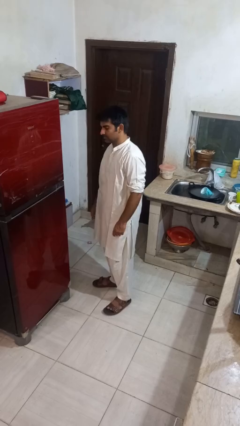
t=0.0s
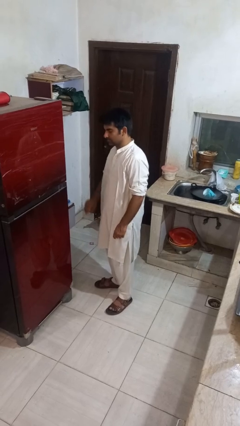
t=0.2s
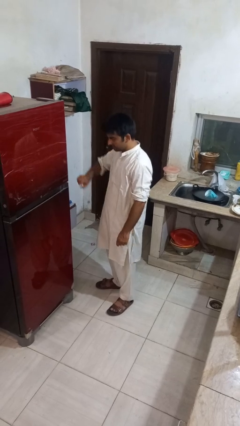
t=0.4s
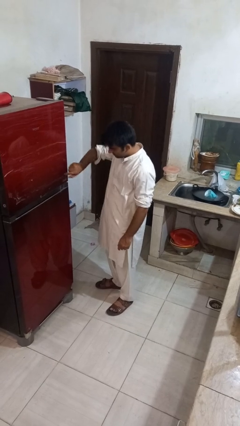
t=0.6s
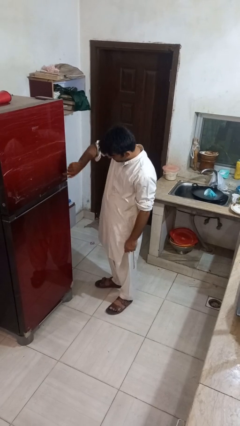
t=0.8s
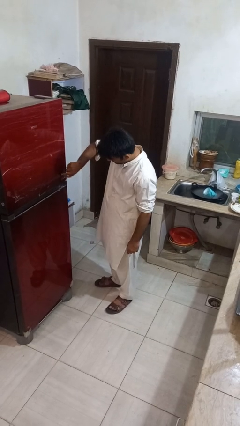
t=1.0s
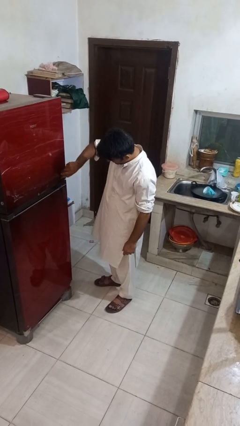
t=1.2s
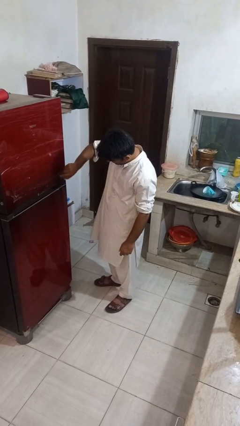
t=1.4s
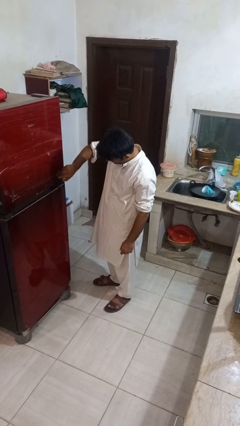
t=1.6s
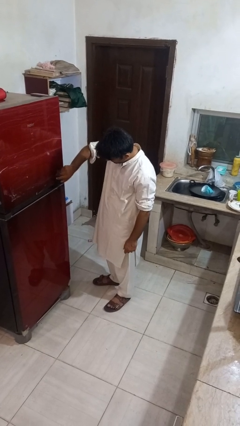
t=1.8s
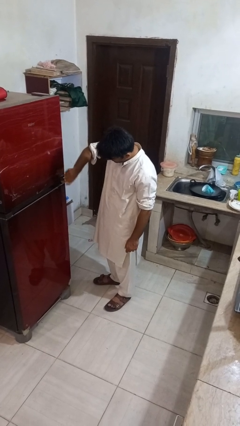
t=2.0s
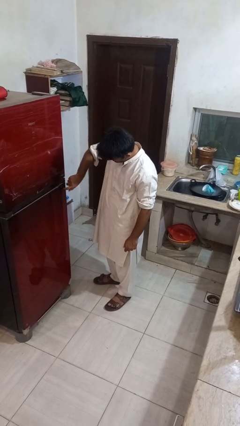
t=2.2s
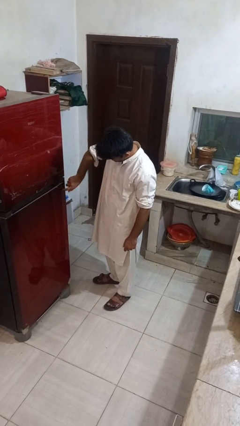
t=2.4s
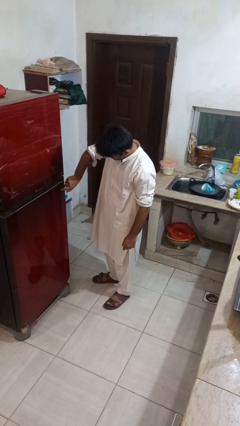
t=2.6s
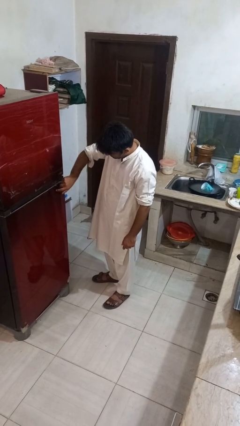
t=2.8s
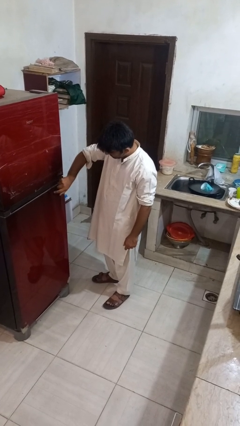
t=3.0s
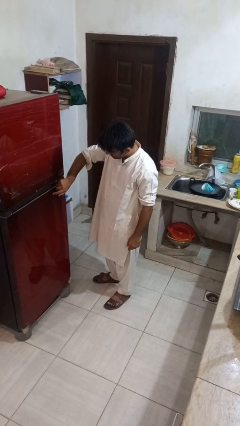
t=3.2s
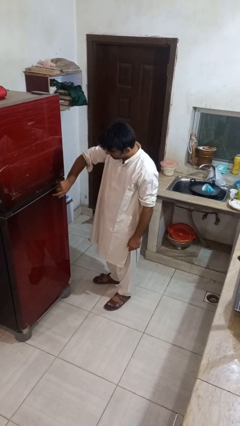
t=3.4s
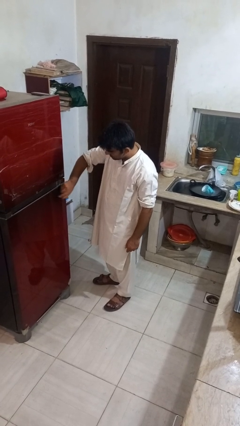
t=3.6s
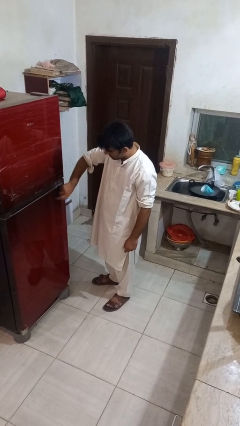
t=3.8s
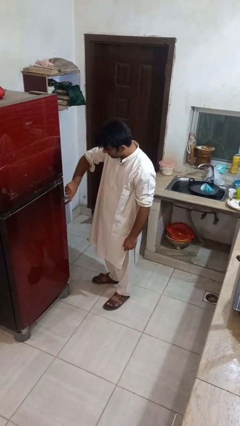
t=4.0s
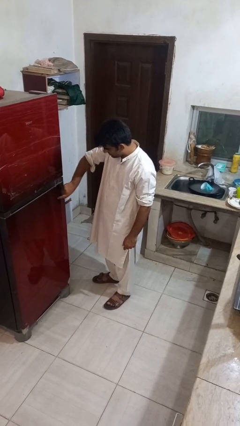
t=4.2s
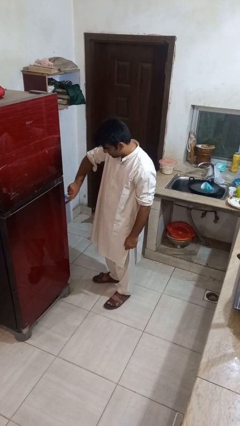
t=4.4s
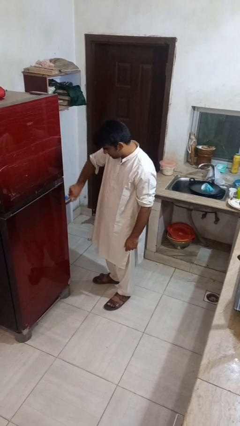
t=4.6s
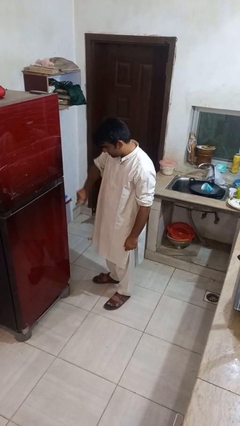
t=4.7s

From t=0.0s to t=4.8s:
person taps object with finger

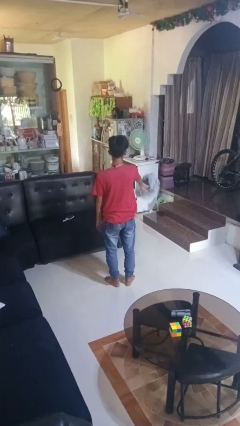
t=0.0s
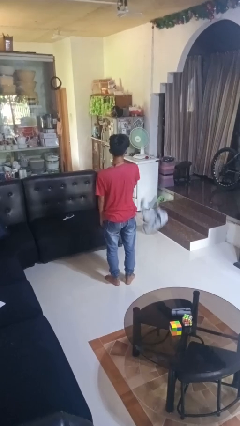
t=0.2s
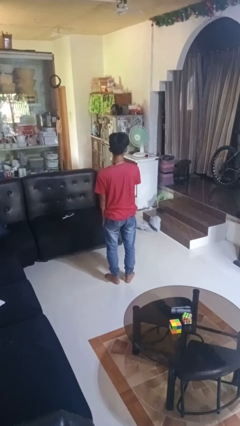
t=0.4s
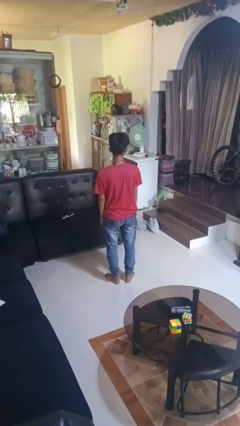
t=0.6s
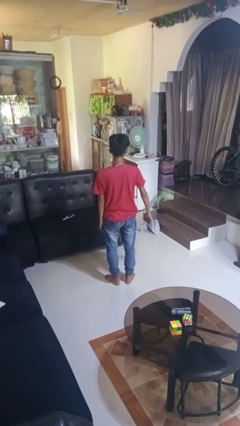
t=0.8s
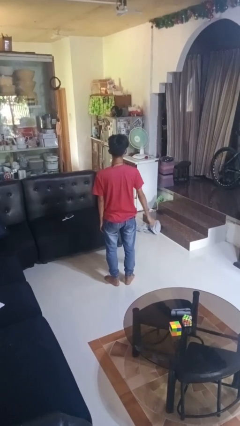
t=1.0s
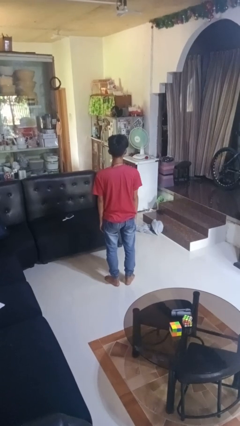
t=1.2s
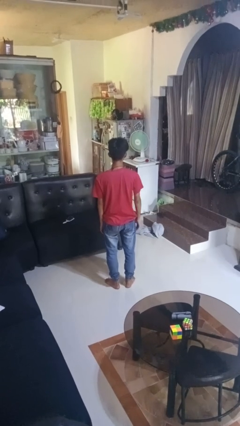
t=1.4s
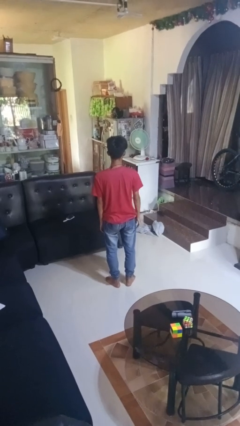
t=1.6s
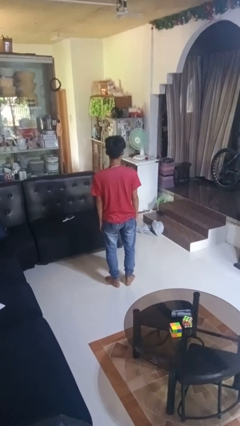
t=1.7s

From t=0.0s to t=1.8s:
person throws object into air

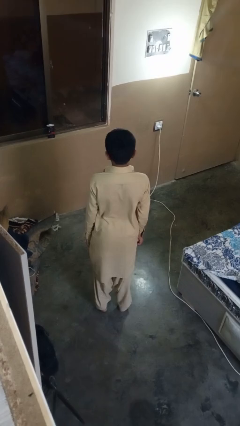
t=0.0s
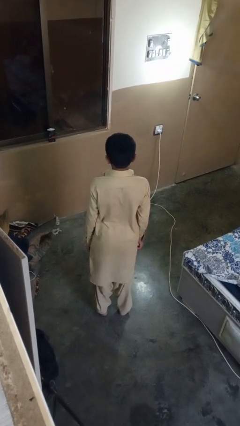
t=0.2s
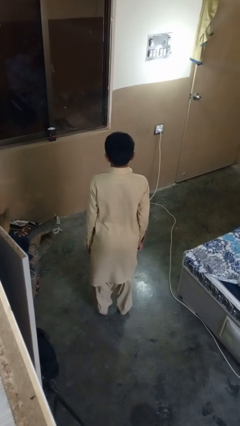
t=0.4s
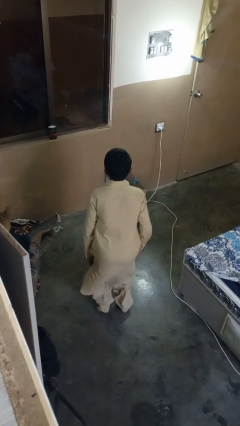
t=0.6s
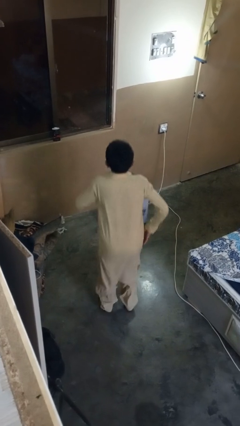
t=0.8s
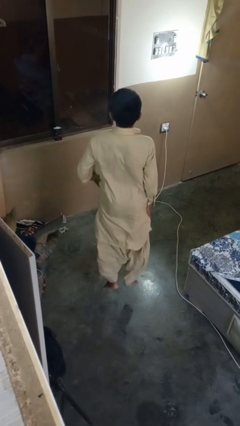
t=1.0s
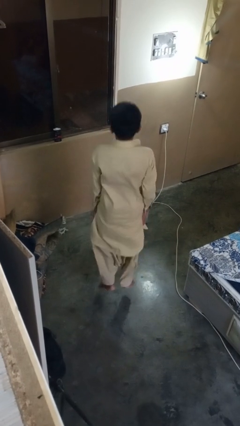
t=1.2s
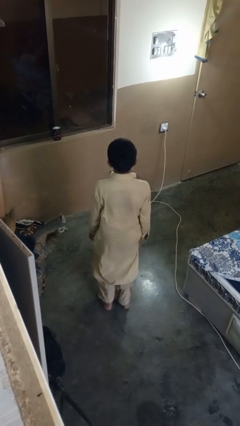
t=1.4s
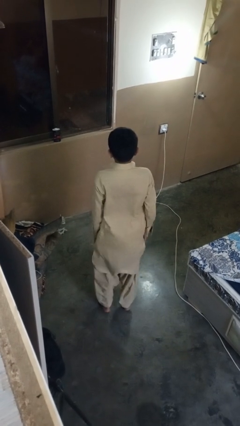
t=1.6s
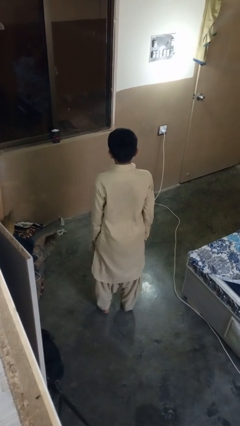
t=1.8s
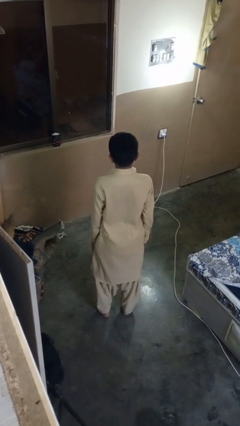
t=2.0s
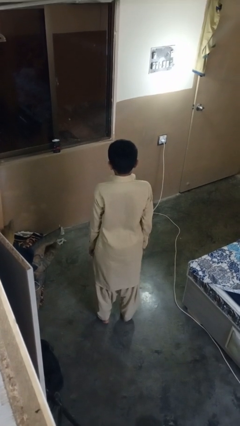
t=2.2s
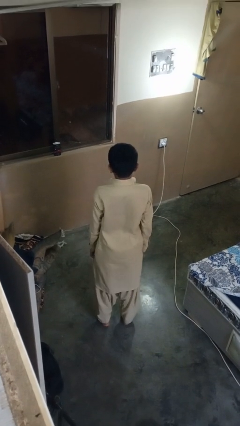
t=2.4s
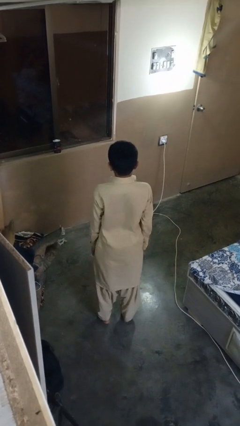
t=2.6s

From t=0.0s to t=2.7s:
person jumps

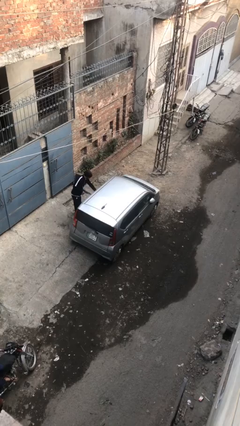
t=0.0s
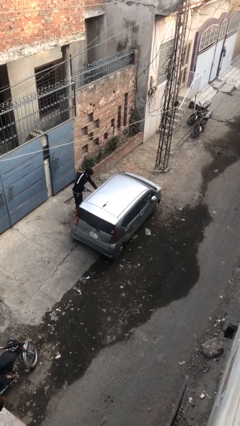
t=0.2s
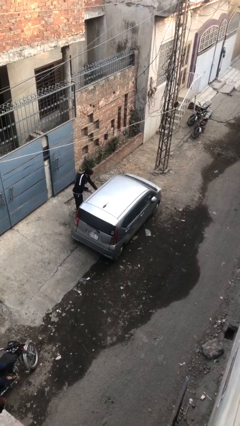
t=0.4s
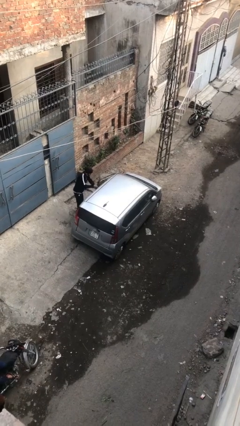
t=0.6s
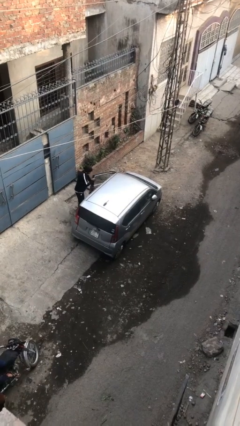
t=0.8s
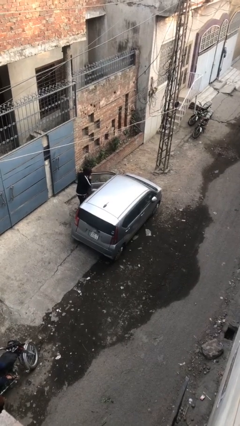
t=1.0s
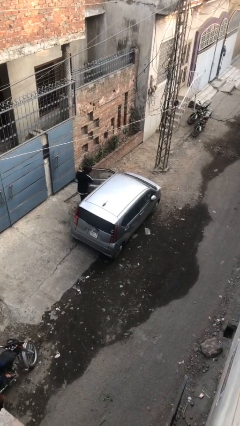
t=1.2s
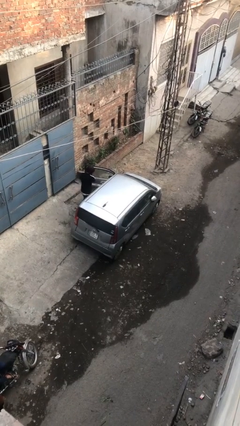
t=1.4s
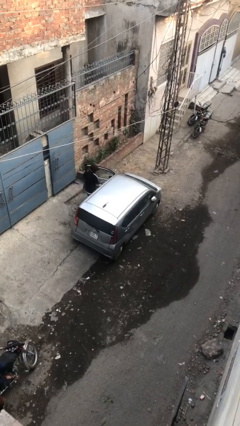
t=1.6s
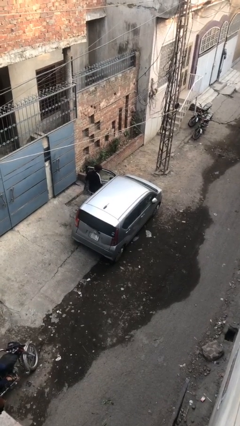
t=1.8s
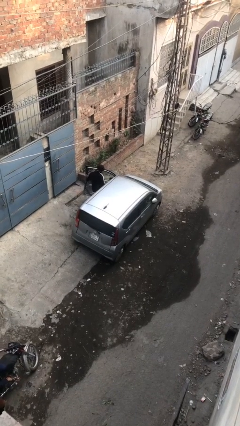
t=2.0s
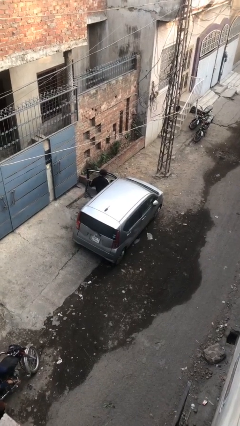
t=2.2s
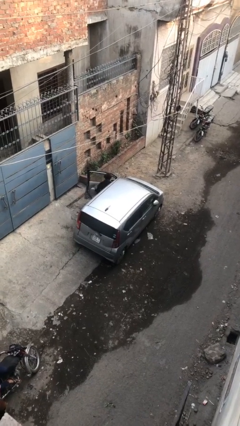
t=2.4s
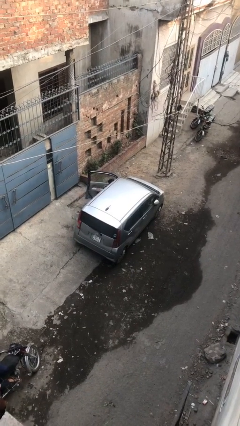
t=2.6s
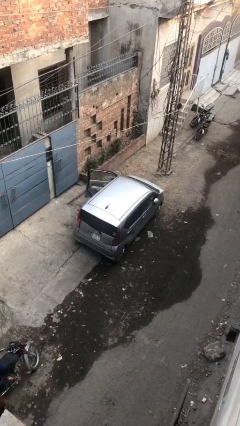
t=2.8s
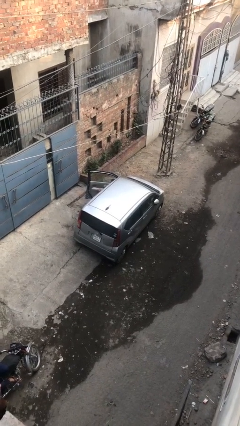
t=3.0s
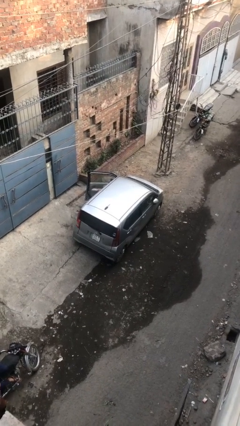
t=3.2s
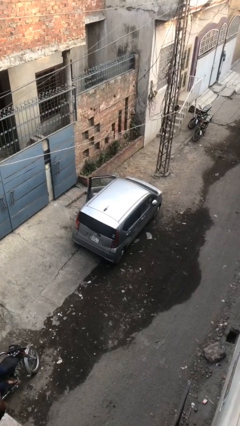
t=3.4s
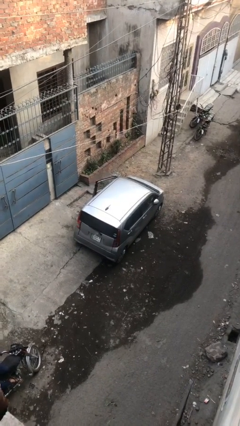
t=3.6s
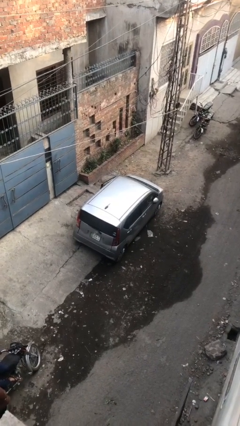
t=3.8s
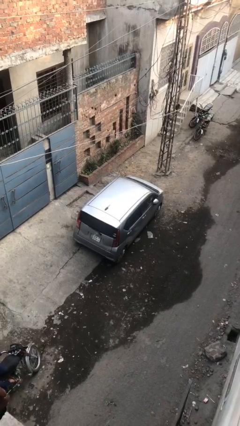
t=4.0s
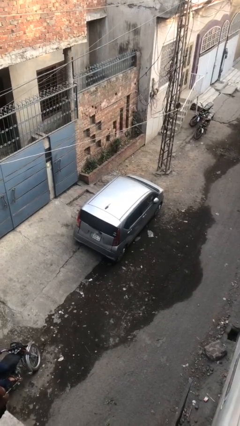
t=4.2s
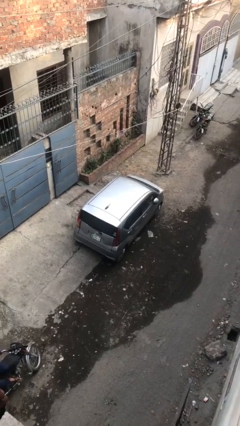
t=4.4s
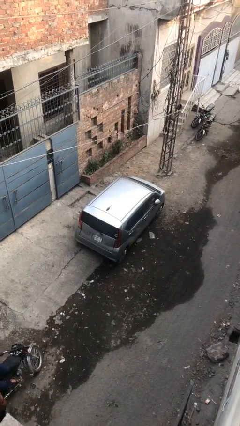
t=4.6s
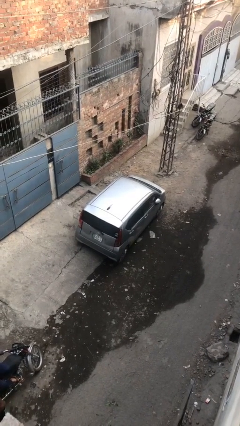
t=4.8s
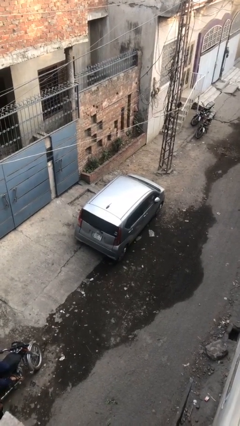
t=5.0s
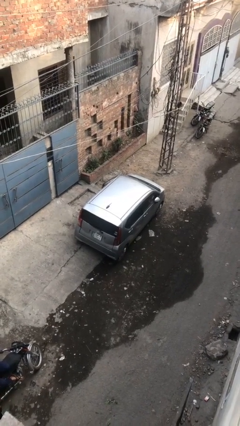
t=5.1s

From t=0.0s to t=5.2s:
car picks up person

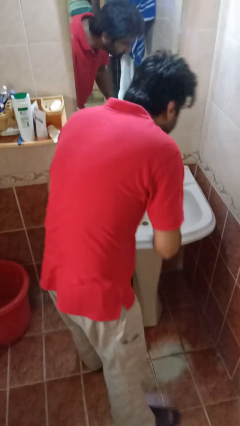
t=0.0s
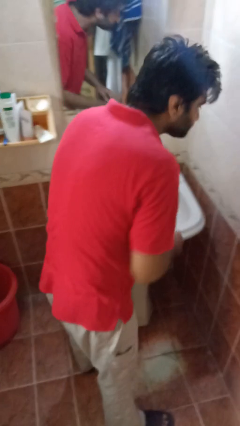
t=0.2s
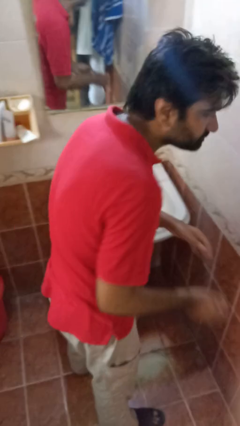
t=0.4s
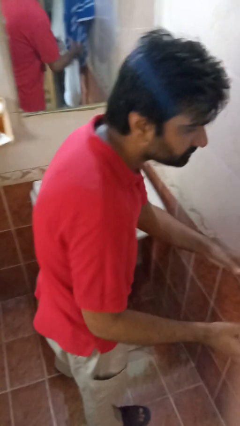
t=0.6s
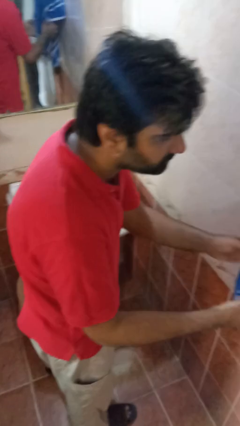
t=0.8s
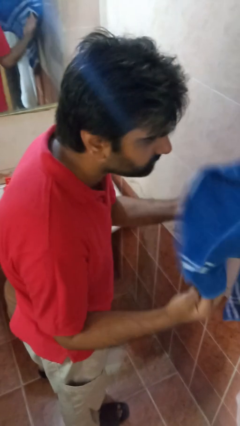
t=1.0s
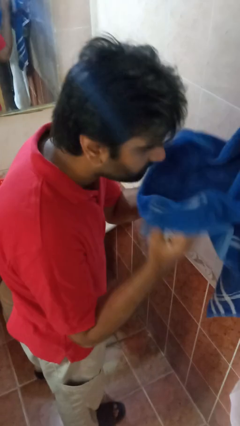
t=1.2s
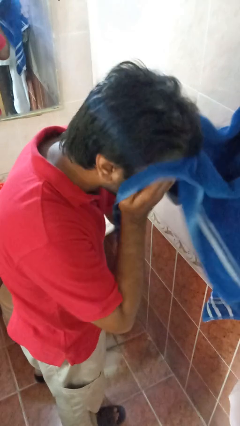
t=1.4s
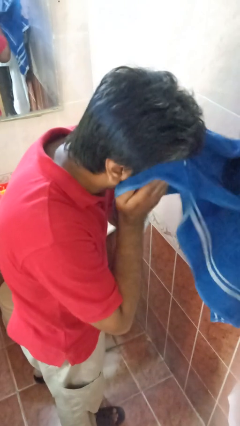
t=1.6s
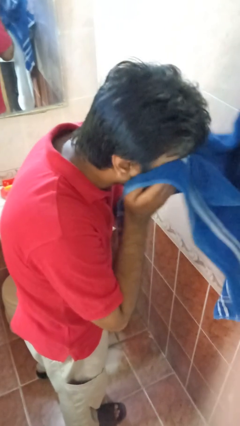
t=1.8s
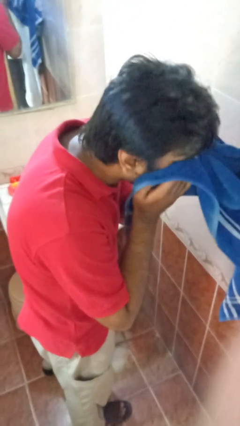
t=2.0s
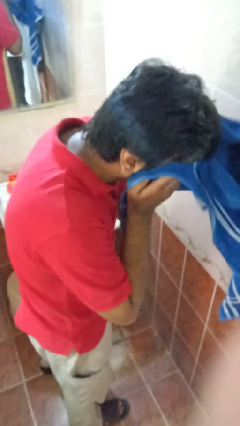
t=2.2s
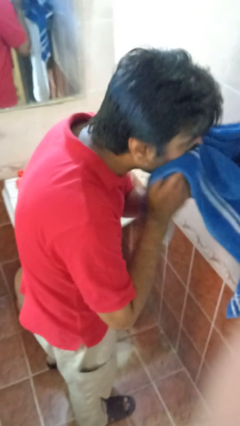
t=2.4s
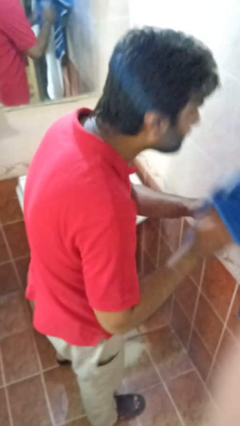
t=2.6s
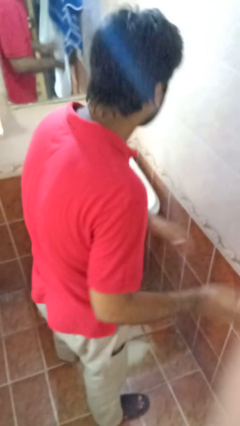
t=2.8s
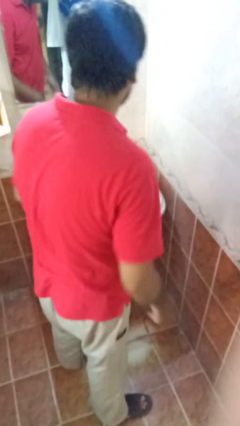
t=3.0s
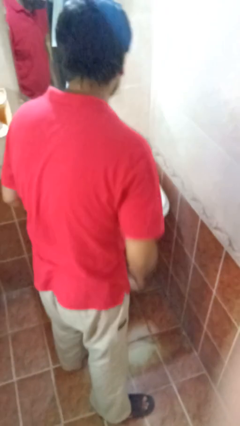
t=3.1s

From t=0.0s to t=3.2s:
person dries face with towel
